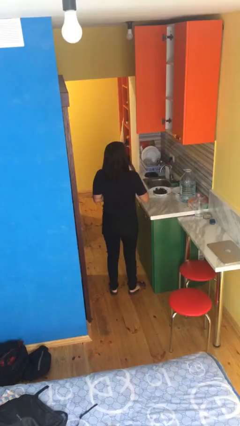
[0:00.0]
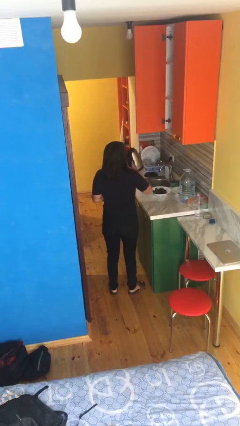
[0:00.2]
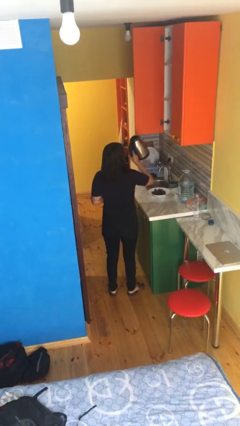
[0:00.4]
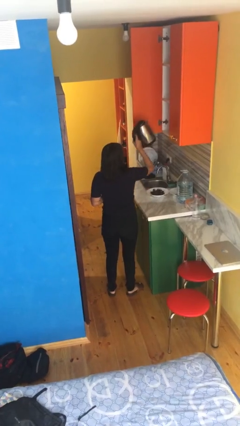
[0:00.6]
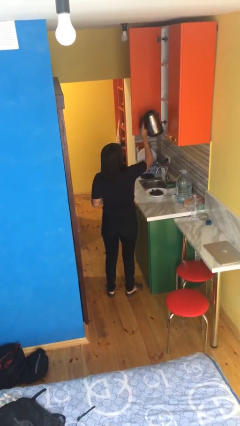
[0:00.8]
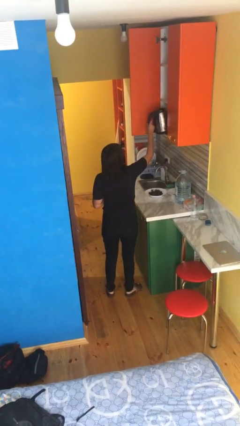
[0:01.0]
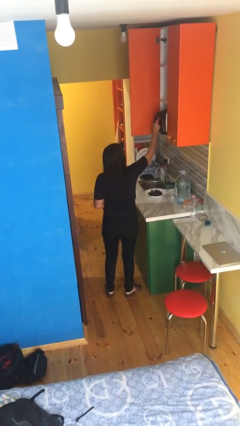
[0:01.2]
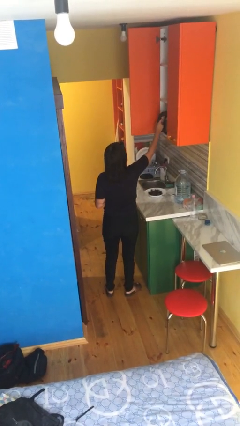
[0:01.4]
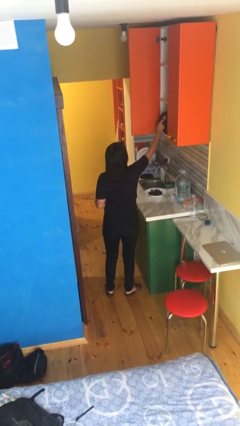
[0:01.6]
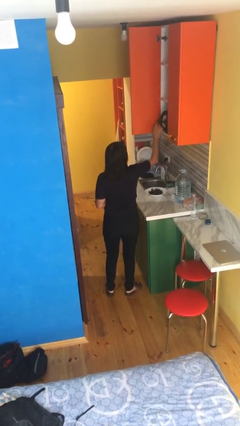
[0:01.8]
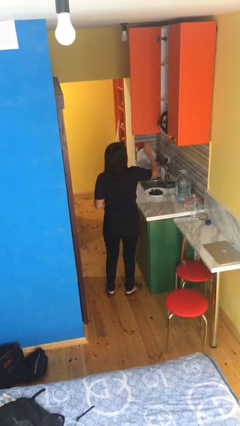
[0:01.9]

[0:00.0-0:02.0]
person puts down object into cabinet

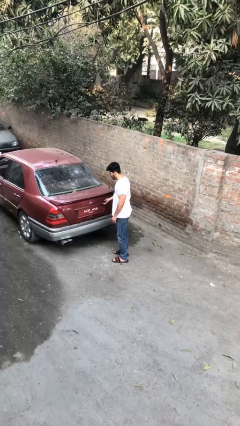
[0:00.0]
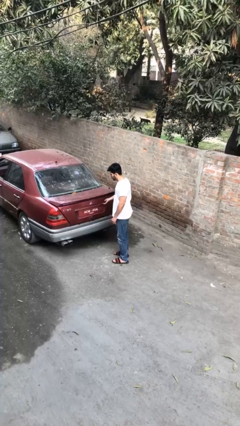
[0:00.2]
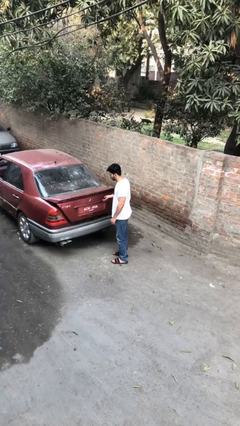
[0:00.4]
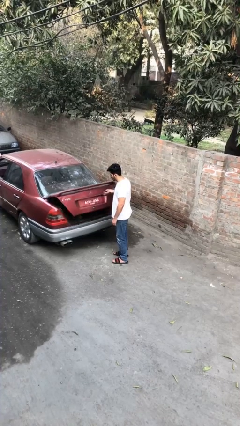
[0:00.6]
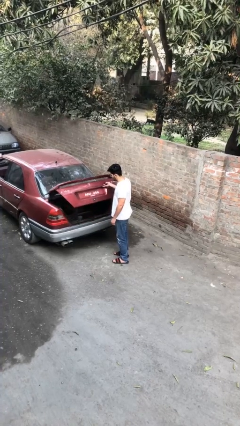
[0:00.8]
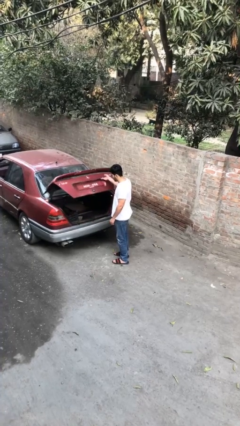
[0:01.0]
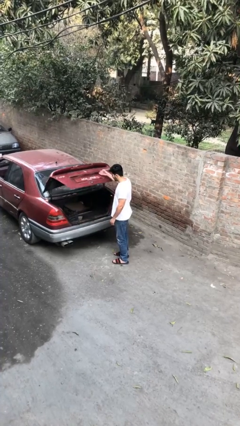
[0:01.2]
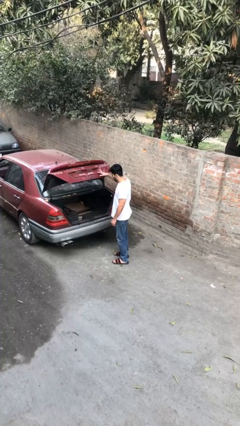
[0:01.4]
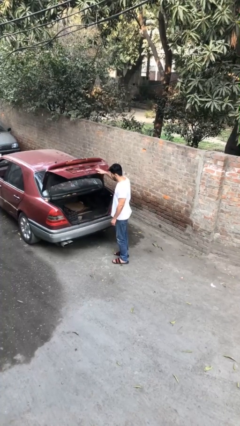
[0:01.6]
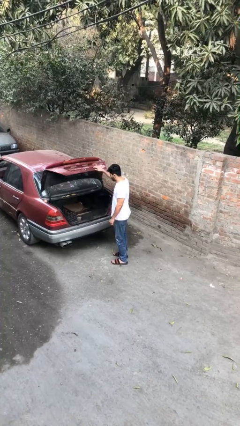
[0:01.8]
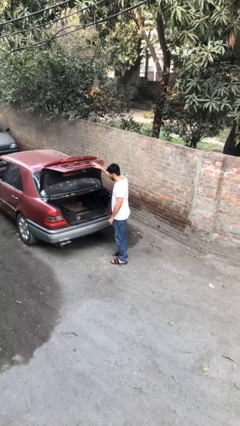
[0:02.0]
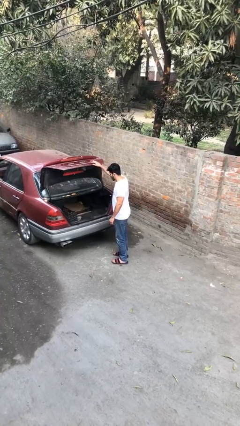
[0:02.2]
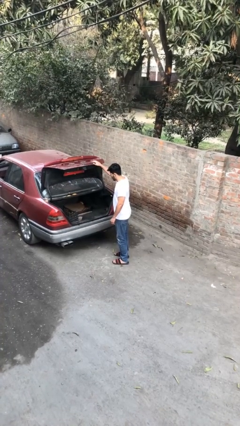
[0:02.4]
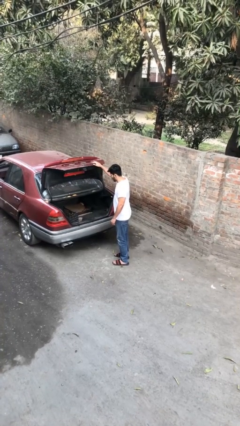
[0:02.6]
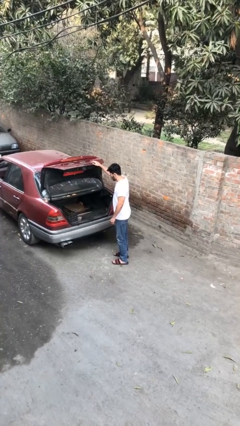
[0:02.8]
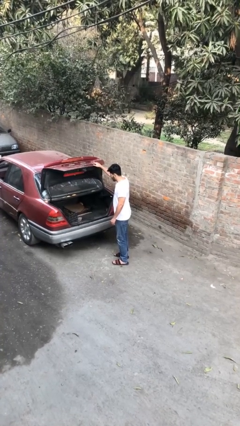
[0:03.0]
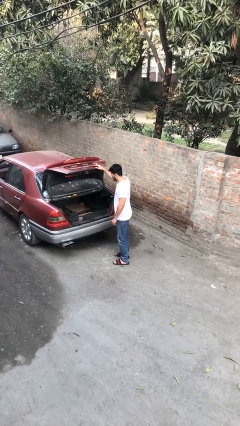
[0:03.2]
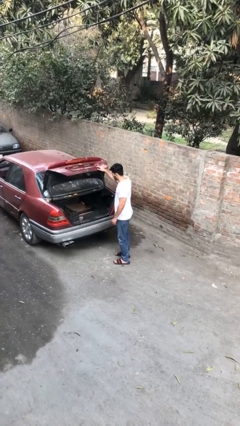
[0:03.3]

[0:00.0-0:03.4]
person opens car trunk

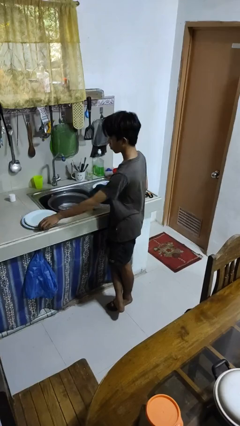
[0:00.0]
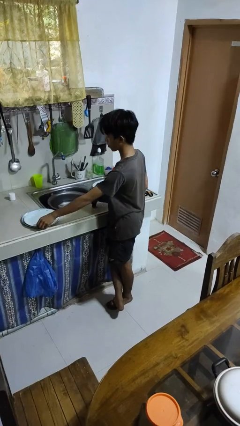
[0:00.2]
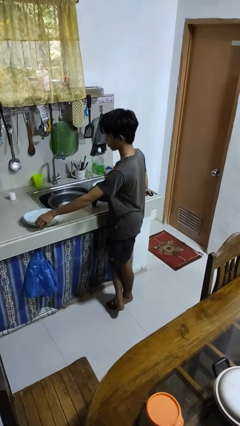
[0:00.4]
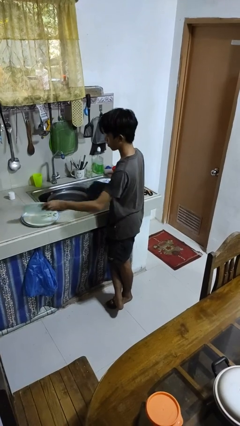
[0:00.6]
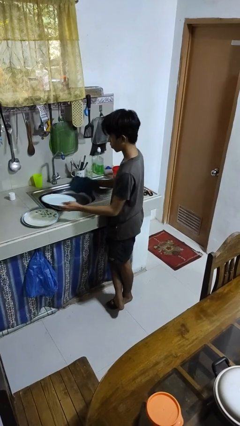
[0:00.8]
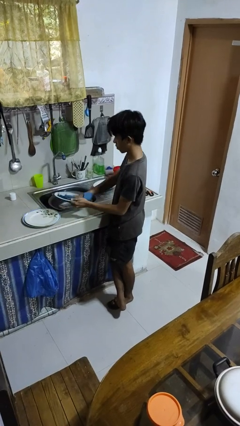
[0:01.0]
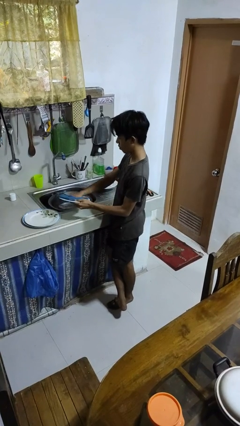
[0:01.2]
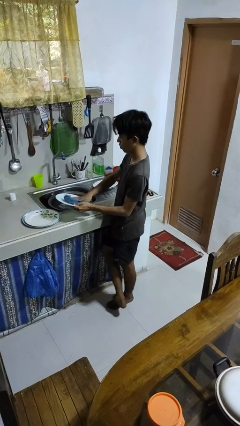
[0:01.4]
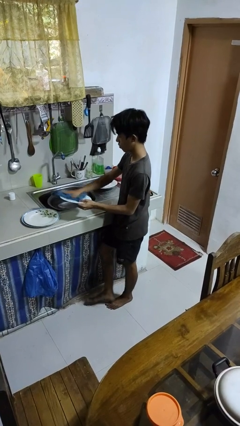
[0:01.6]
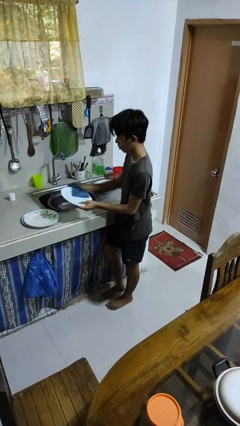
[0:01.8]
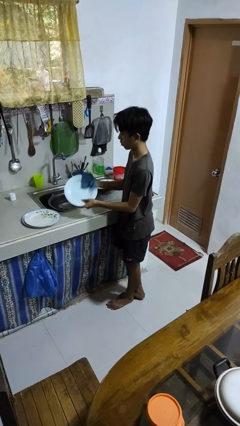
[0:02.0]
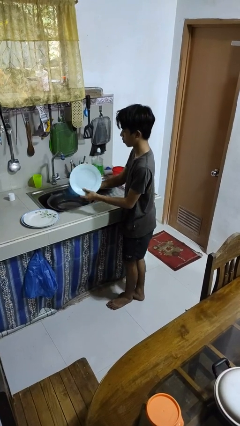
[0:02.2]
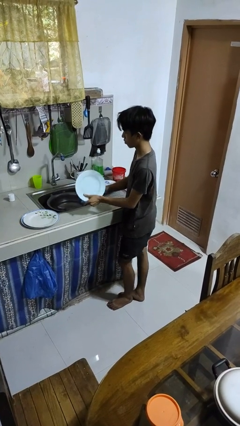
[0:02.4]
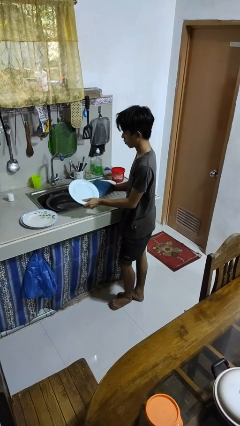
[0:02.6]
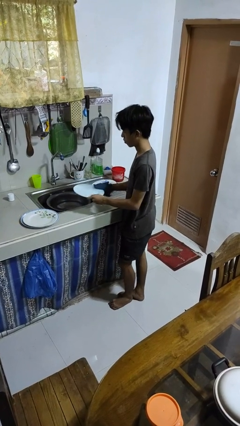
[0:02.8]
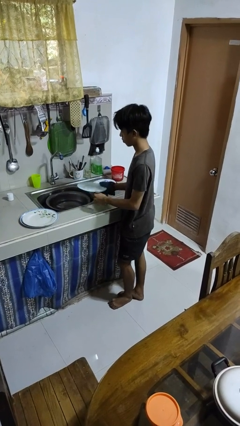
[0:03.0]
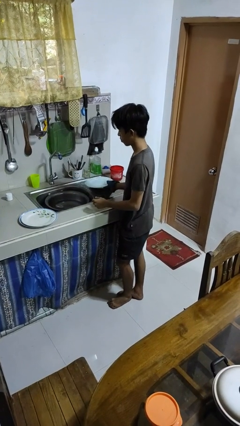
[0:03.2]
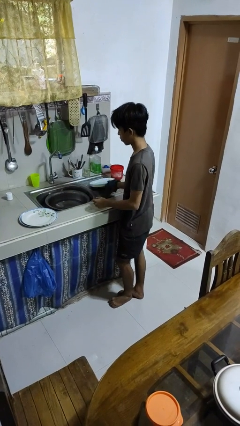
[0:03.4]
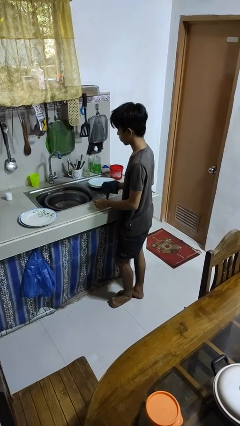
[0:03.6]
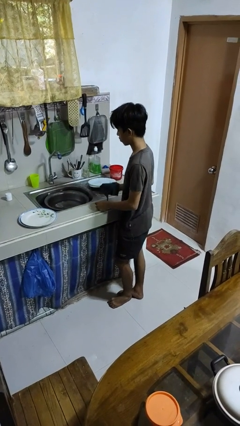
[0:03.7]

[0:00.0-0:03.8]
person dries dish

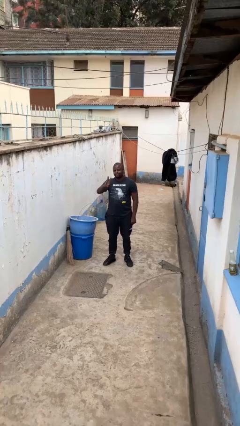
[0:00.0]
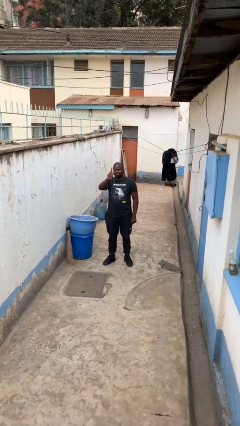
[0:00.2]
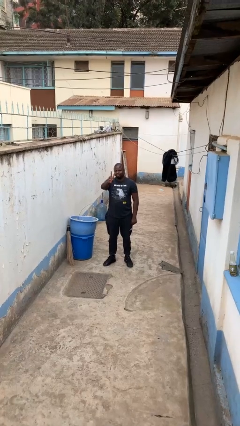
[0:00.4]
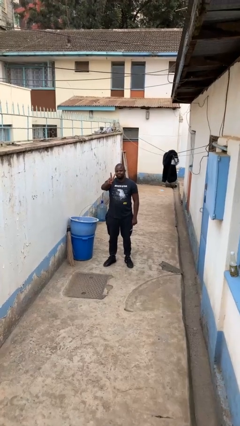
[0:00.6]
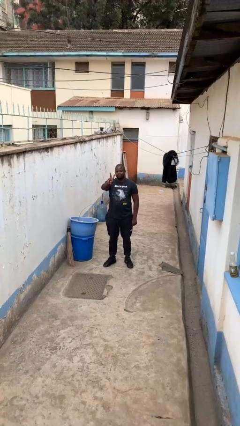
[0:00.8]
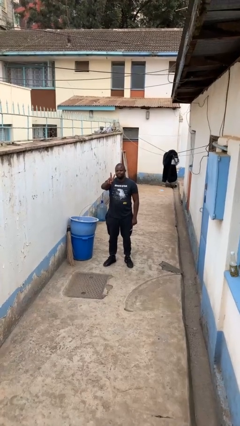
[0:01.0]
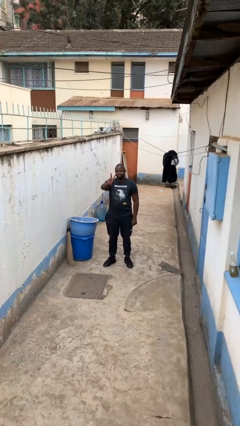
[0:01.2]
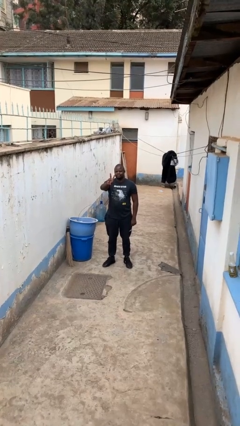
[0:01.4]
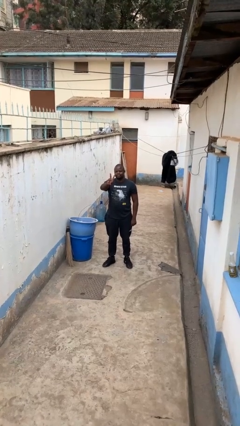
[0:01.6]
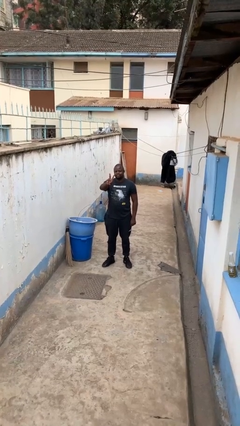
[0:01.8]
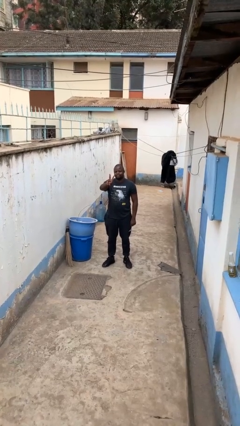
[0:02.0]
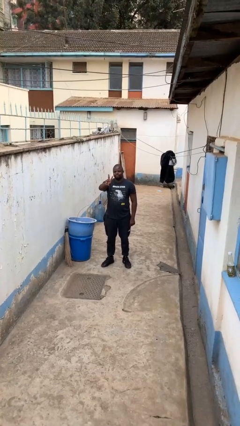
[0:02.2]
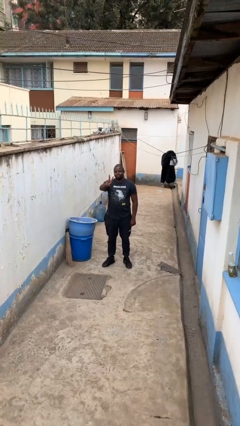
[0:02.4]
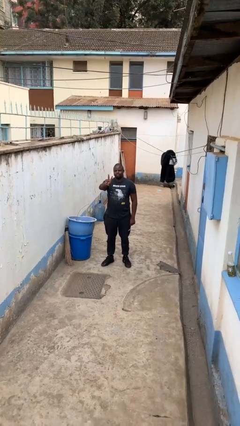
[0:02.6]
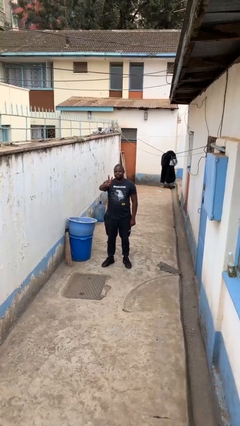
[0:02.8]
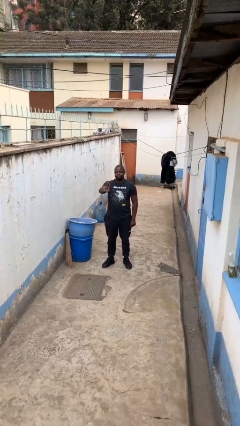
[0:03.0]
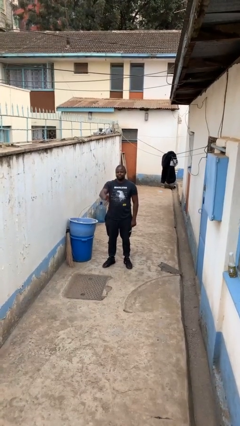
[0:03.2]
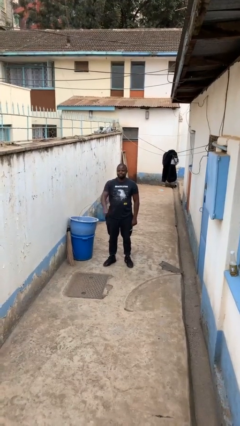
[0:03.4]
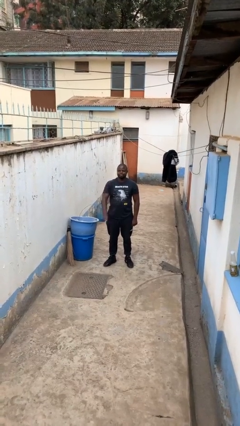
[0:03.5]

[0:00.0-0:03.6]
person gestures peace

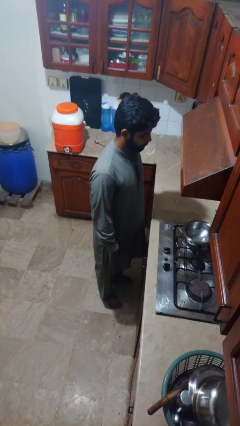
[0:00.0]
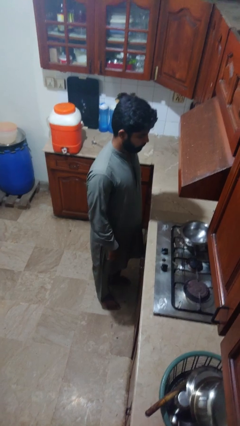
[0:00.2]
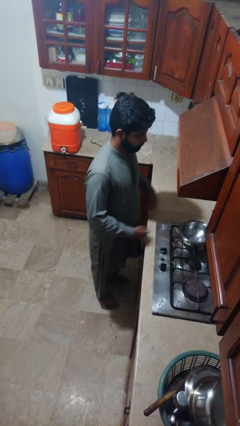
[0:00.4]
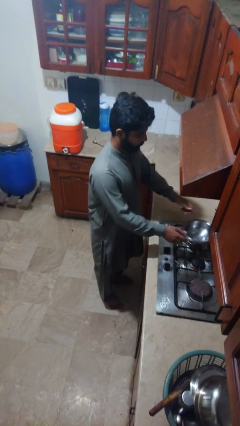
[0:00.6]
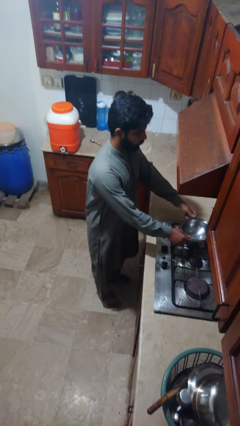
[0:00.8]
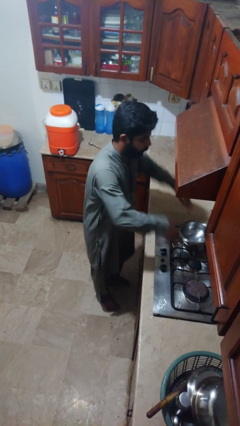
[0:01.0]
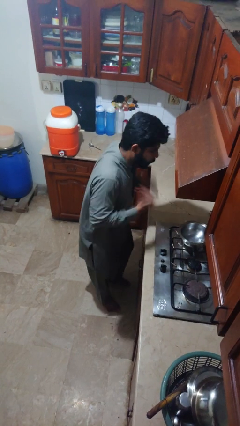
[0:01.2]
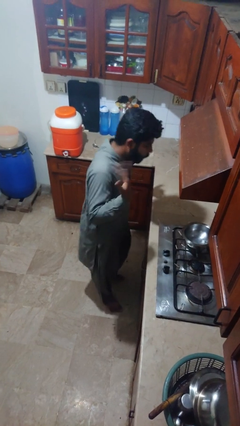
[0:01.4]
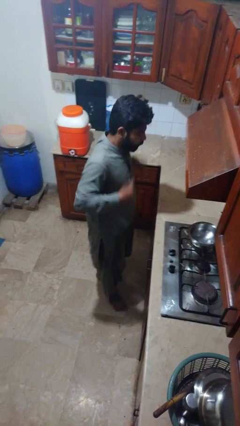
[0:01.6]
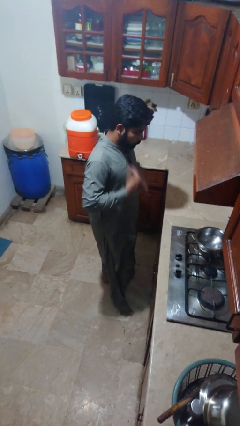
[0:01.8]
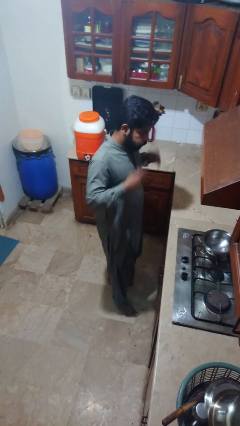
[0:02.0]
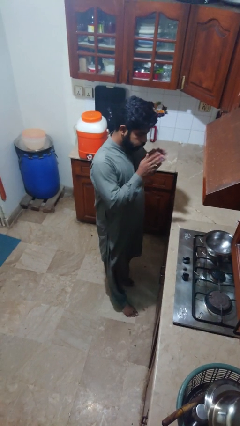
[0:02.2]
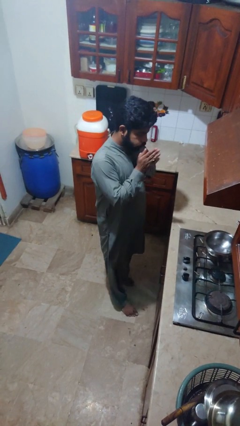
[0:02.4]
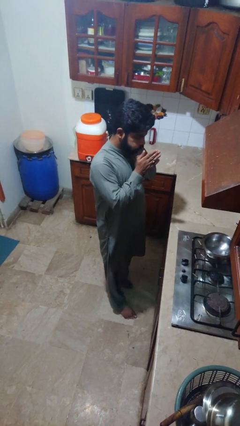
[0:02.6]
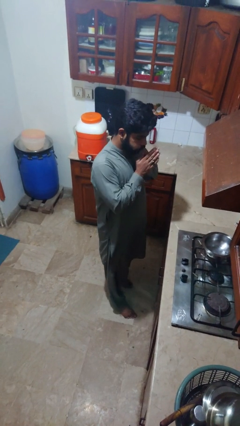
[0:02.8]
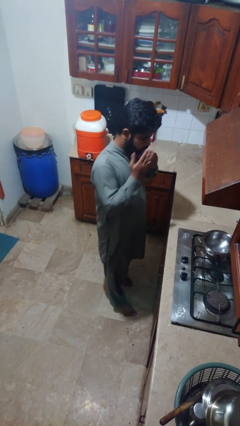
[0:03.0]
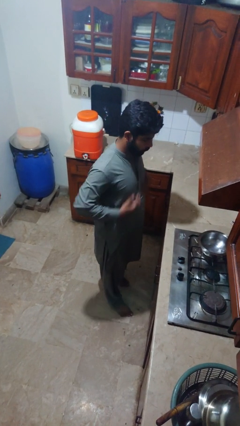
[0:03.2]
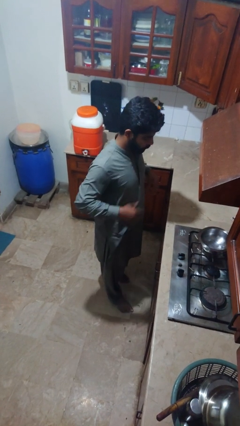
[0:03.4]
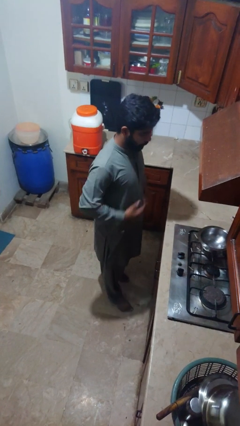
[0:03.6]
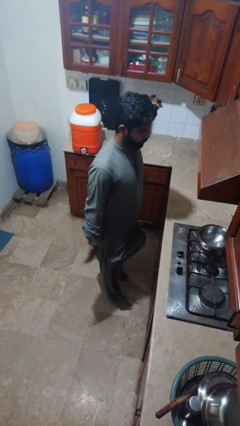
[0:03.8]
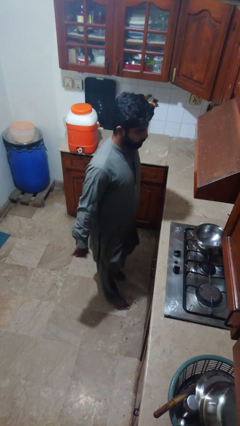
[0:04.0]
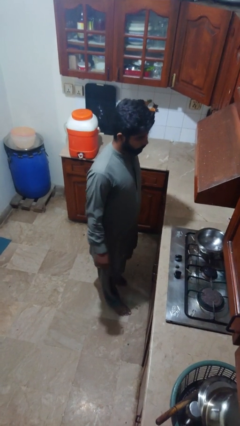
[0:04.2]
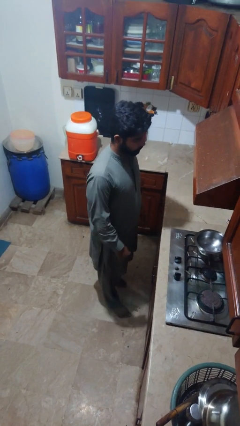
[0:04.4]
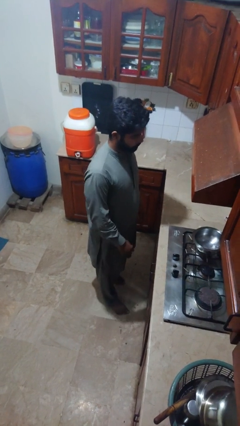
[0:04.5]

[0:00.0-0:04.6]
person burns hand
